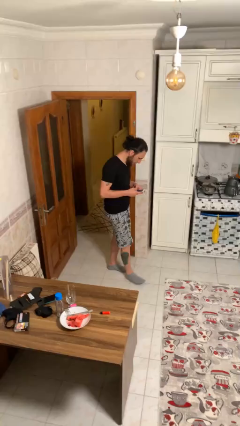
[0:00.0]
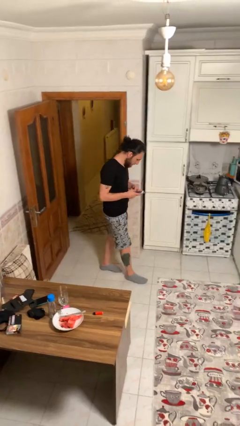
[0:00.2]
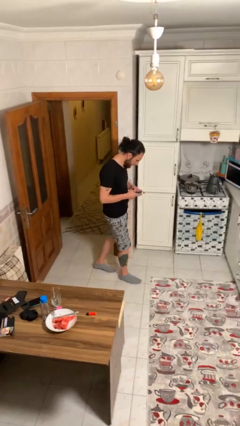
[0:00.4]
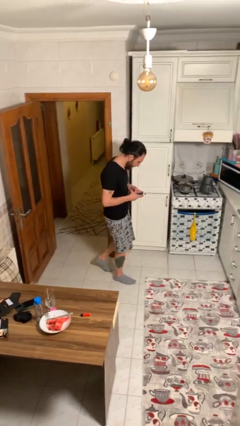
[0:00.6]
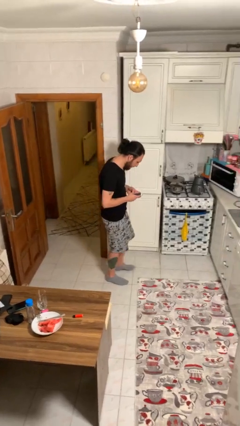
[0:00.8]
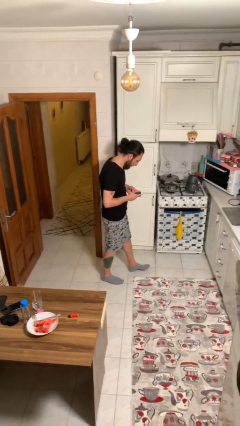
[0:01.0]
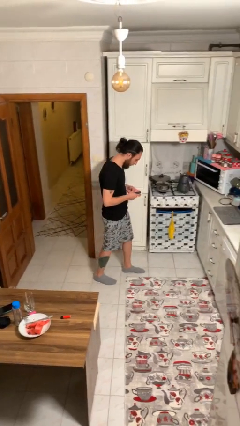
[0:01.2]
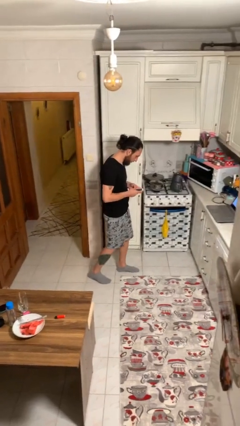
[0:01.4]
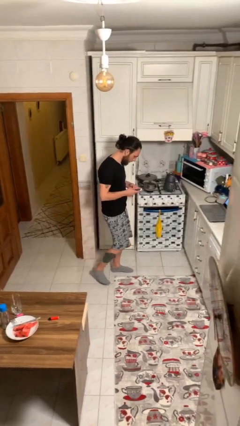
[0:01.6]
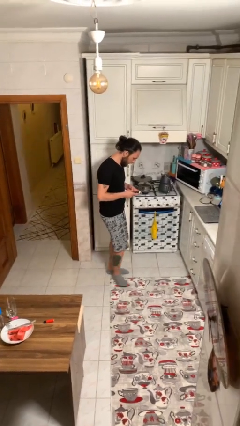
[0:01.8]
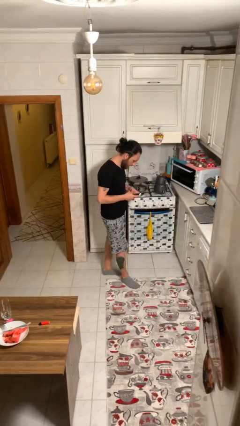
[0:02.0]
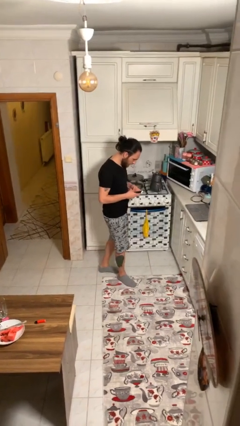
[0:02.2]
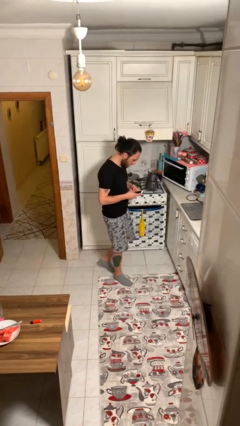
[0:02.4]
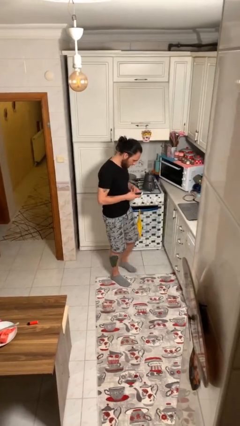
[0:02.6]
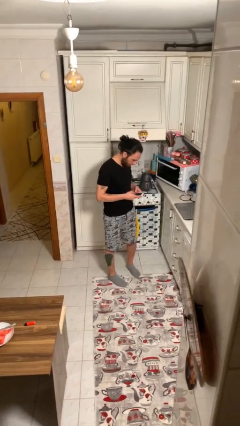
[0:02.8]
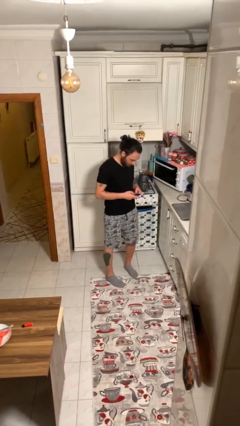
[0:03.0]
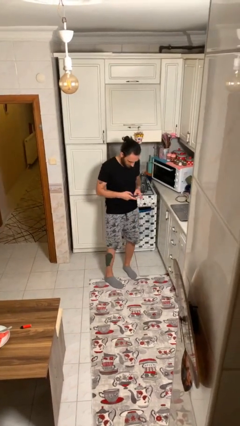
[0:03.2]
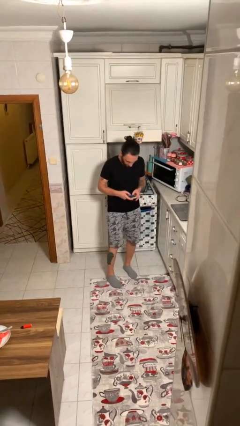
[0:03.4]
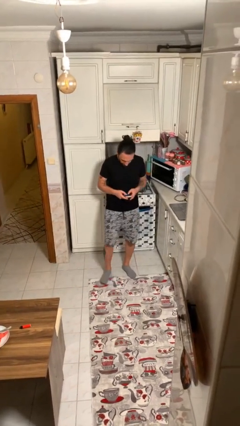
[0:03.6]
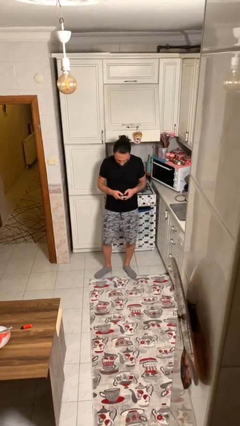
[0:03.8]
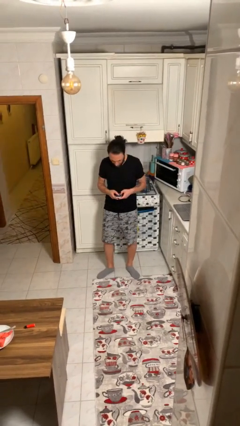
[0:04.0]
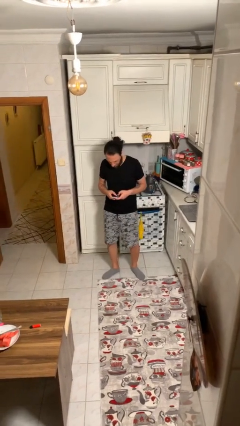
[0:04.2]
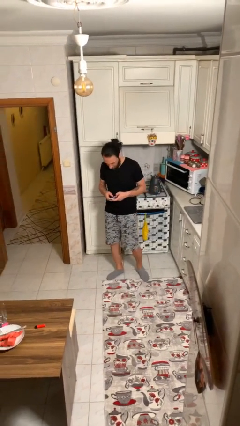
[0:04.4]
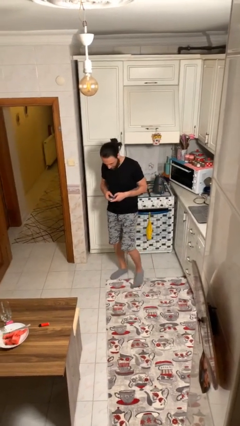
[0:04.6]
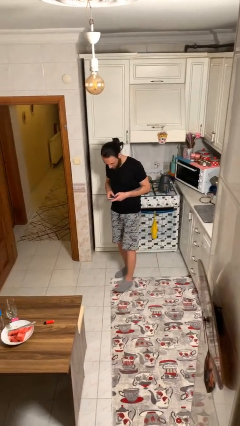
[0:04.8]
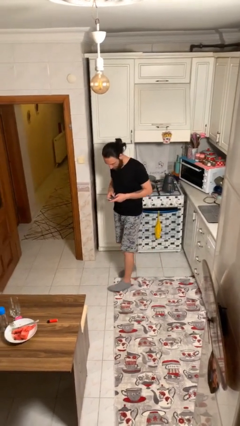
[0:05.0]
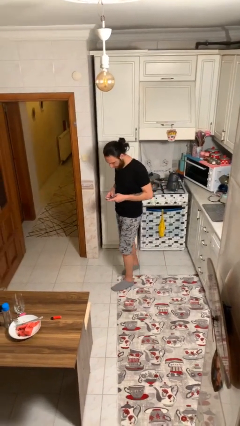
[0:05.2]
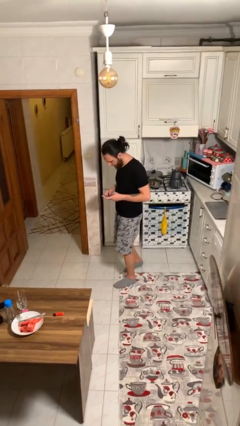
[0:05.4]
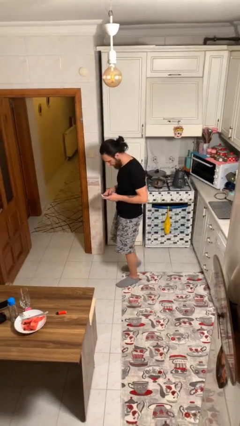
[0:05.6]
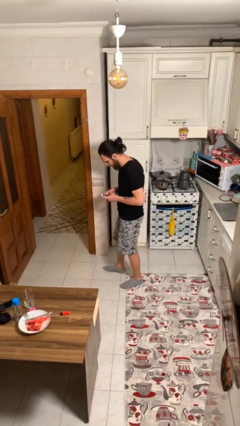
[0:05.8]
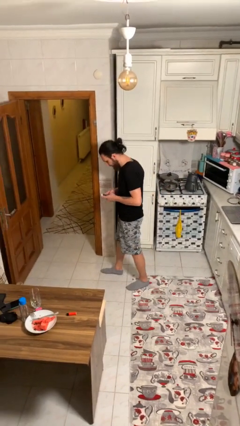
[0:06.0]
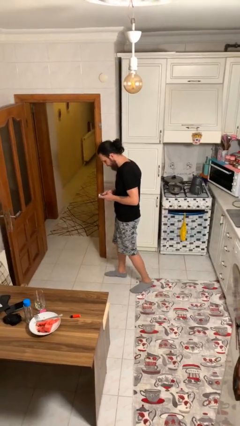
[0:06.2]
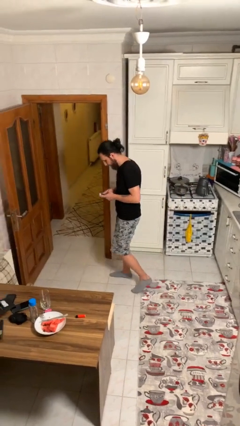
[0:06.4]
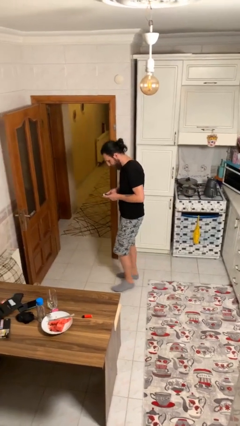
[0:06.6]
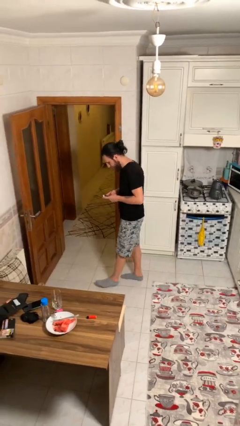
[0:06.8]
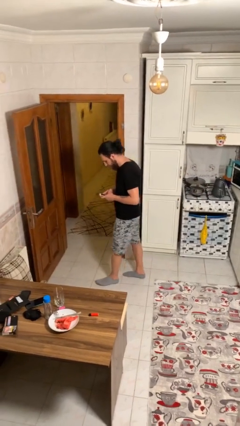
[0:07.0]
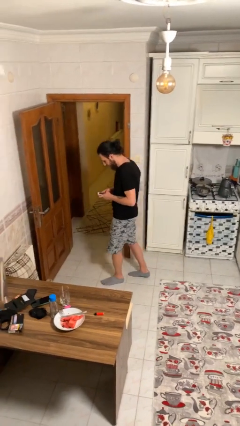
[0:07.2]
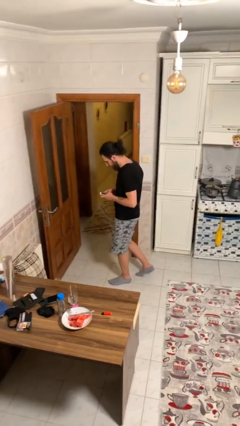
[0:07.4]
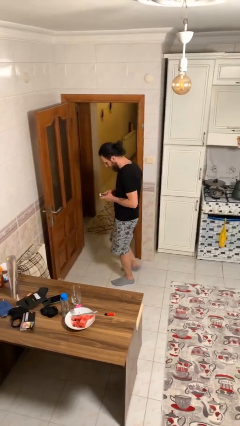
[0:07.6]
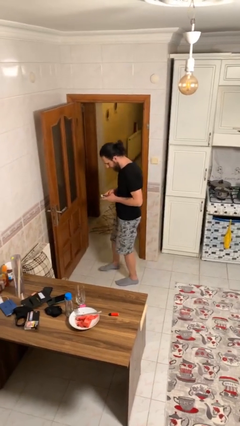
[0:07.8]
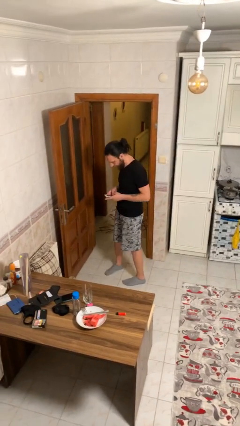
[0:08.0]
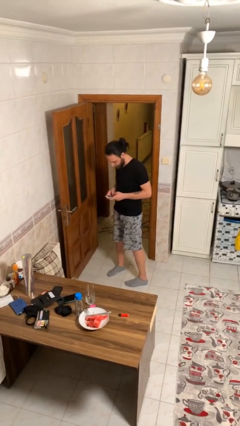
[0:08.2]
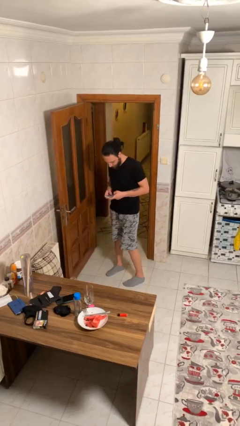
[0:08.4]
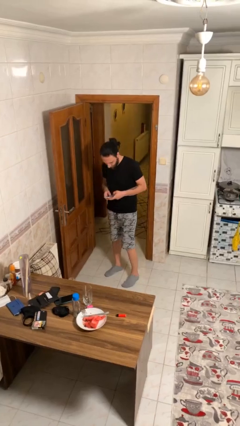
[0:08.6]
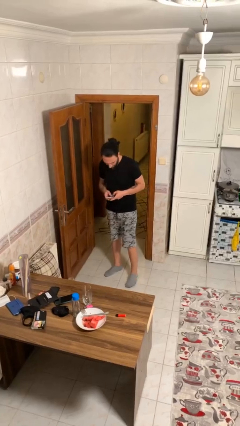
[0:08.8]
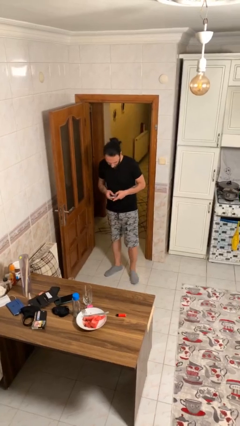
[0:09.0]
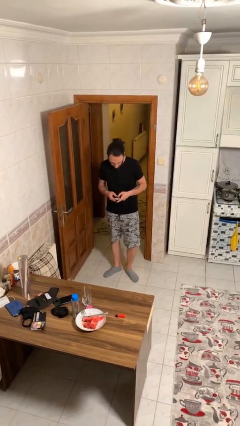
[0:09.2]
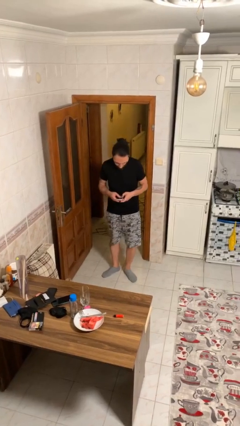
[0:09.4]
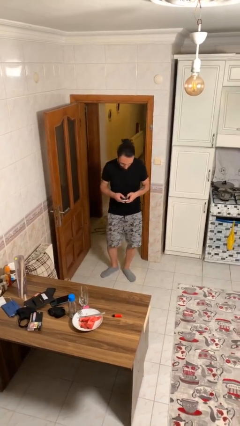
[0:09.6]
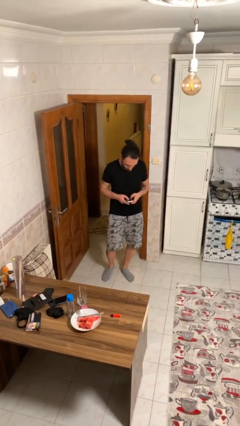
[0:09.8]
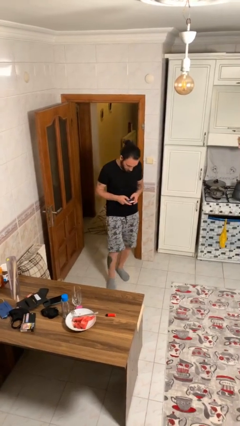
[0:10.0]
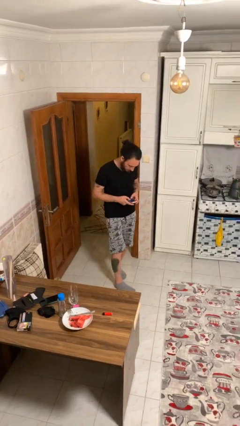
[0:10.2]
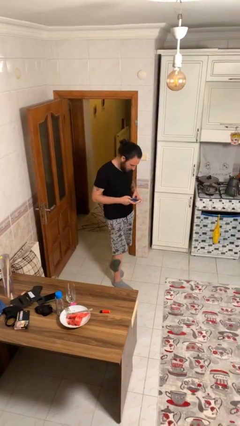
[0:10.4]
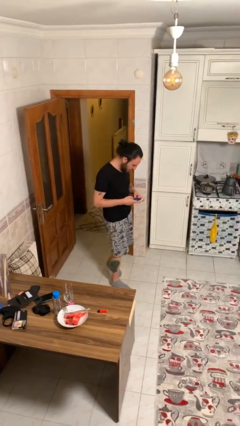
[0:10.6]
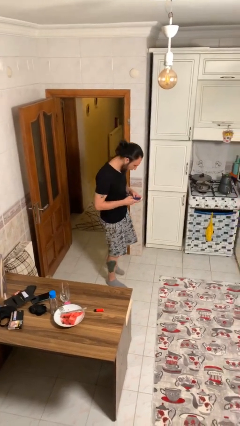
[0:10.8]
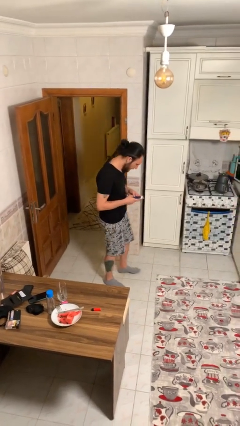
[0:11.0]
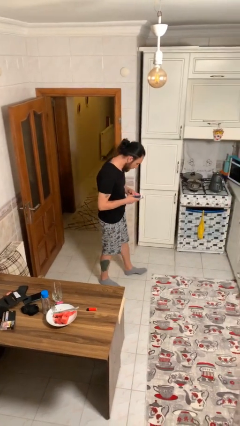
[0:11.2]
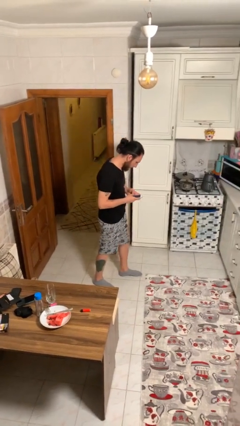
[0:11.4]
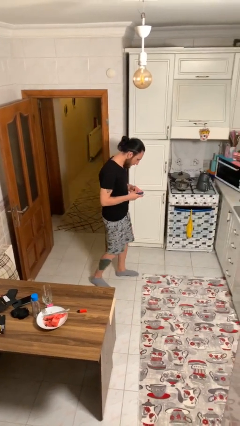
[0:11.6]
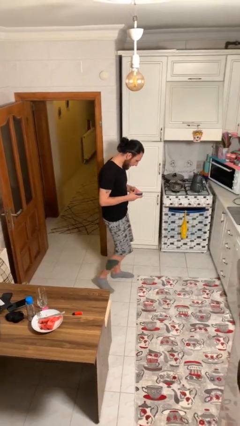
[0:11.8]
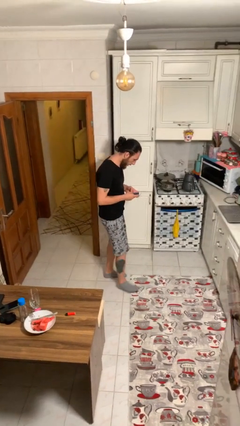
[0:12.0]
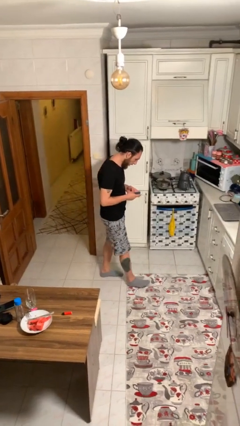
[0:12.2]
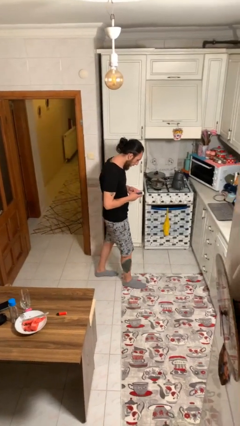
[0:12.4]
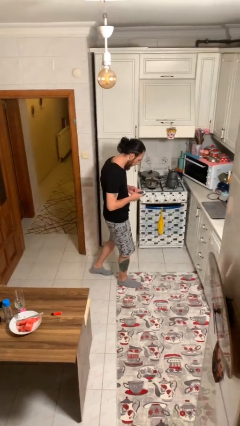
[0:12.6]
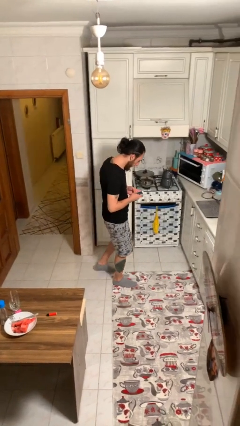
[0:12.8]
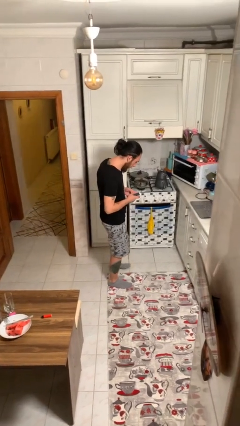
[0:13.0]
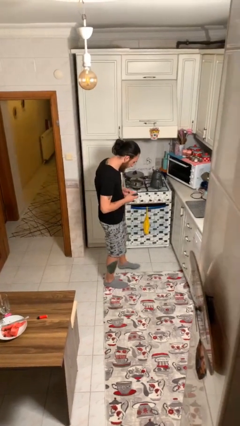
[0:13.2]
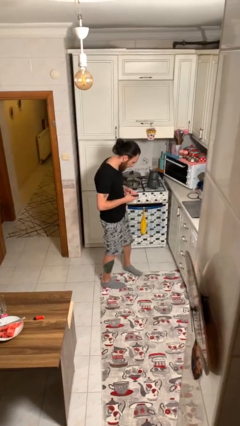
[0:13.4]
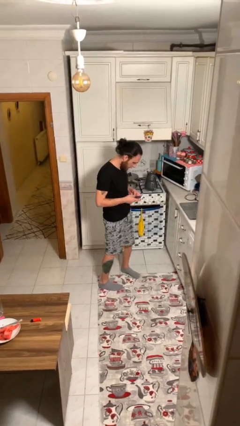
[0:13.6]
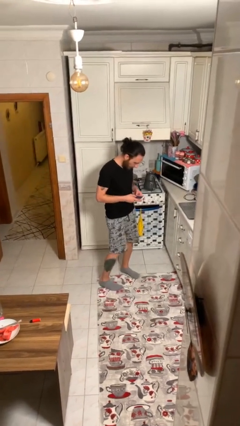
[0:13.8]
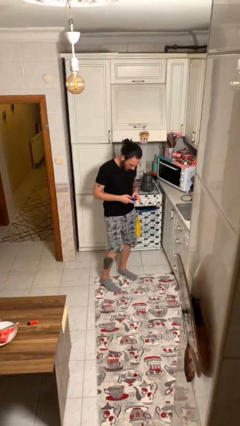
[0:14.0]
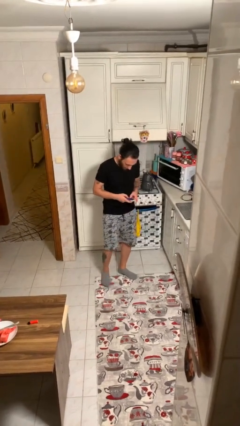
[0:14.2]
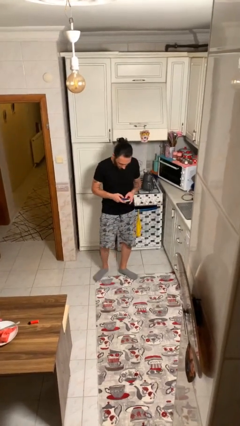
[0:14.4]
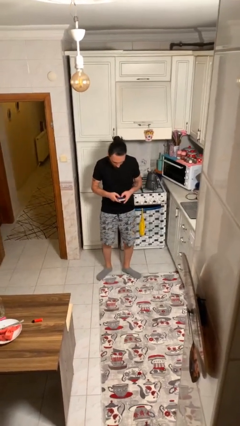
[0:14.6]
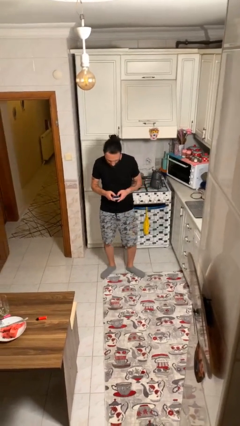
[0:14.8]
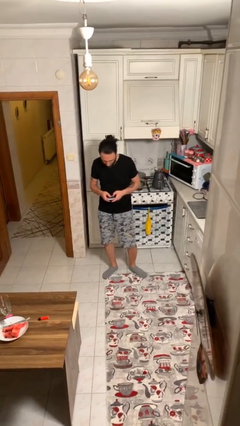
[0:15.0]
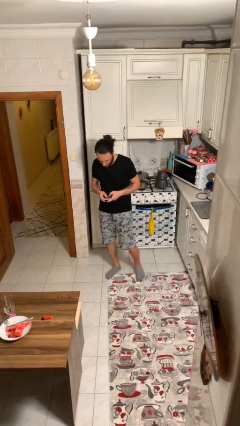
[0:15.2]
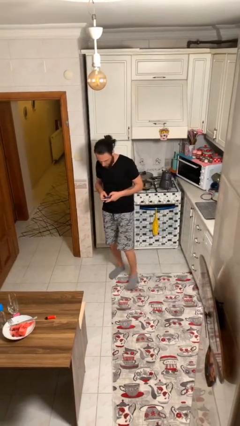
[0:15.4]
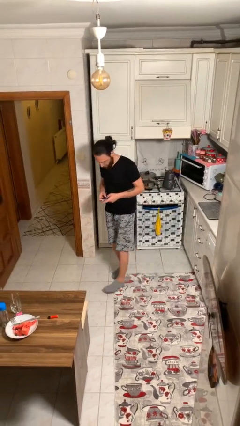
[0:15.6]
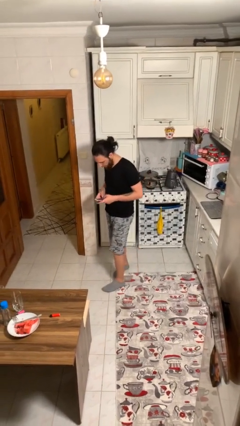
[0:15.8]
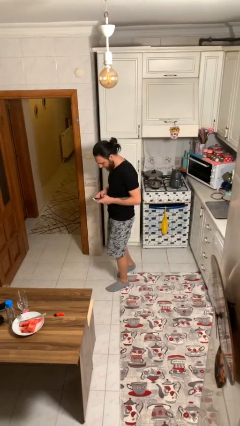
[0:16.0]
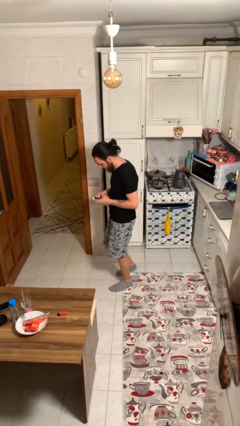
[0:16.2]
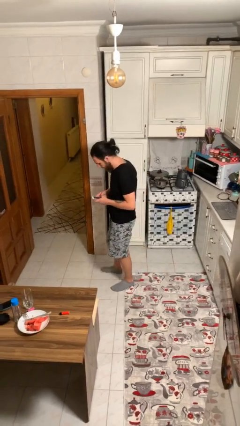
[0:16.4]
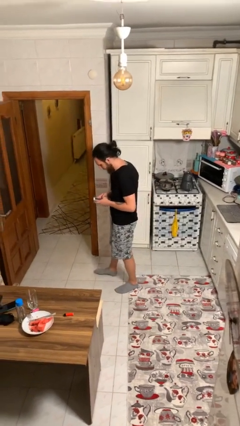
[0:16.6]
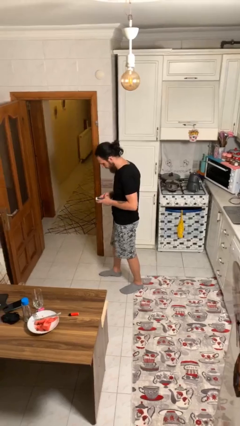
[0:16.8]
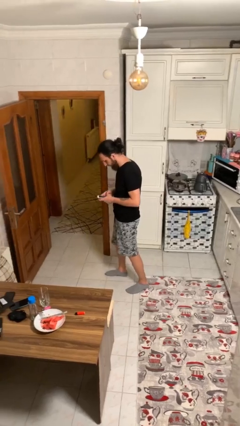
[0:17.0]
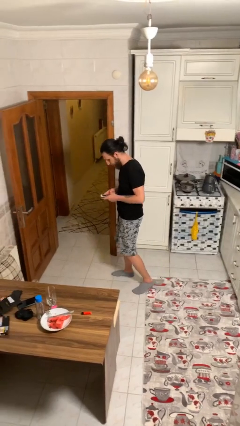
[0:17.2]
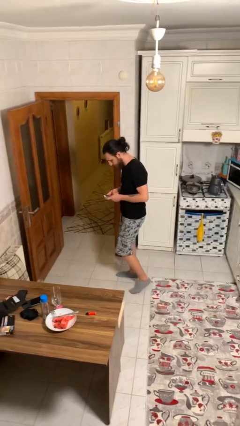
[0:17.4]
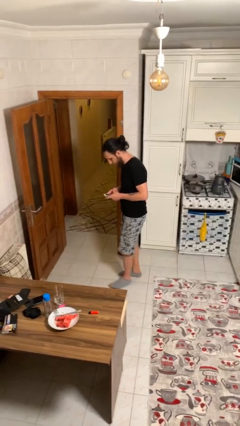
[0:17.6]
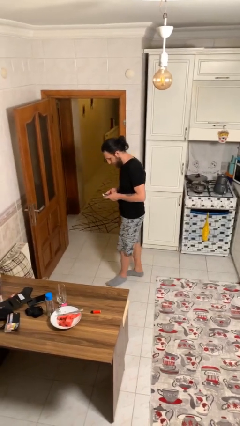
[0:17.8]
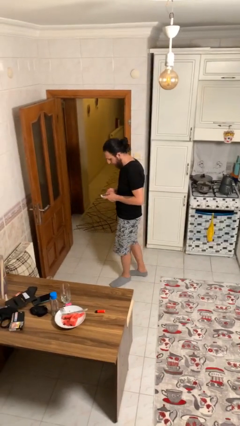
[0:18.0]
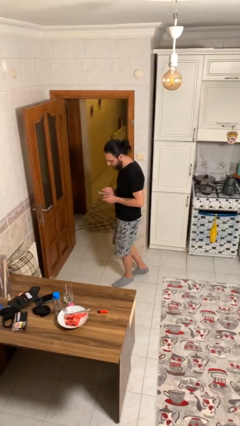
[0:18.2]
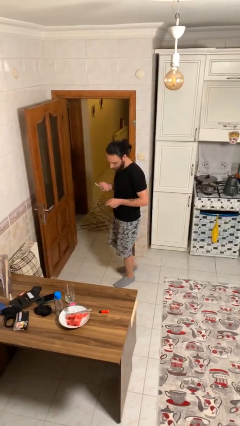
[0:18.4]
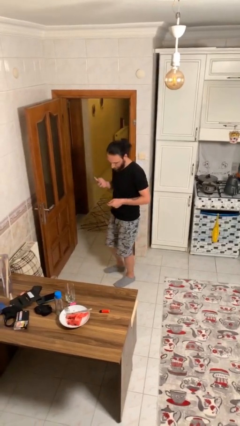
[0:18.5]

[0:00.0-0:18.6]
person texts on phone
